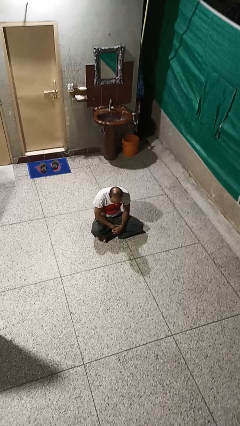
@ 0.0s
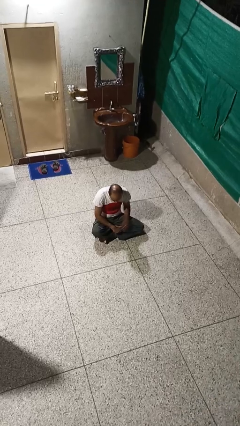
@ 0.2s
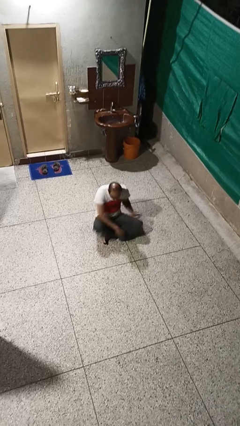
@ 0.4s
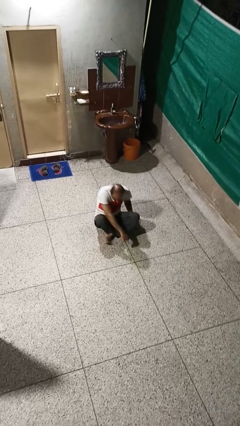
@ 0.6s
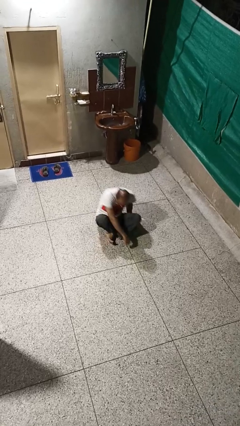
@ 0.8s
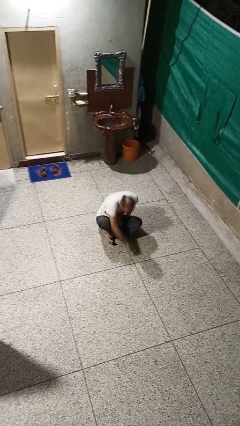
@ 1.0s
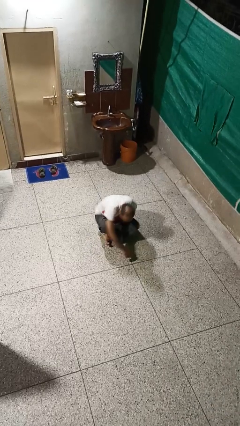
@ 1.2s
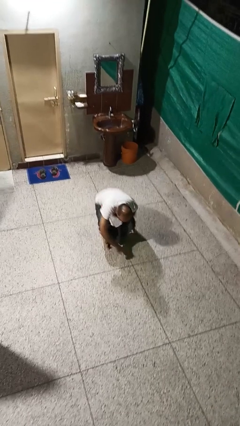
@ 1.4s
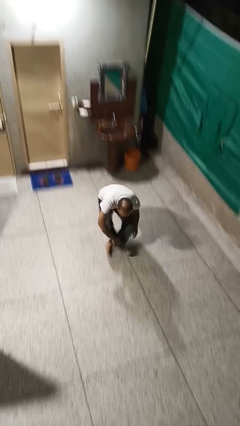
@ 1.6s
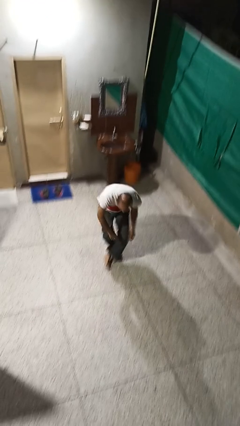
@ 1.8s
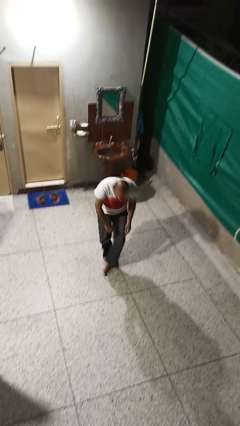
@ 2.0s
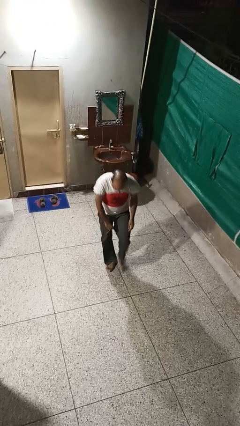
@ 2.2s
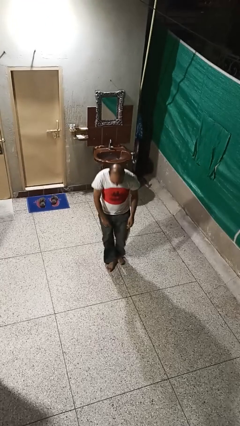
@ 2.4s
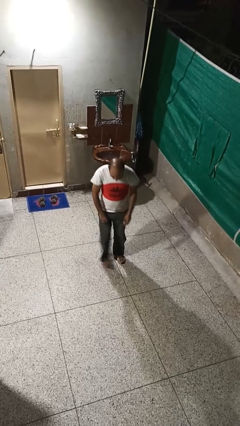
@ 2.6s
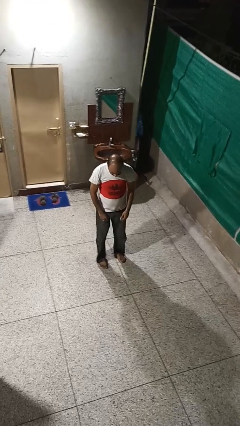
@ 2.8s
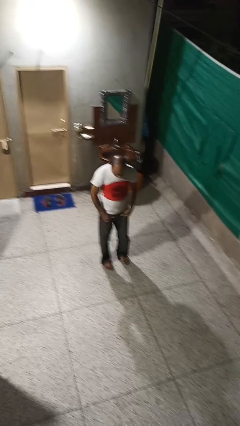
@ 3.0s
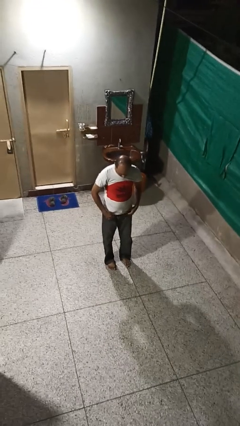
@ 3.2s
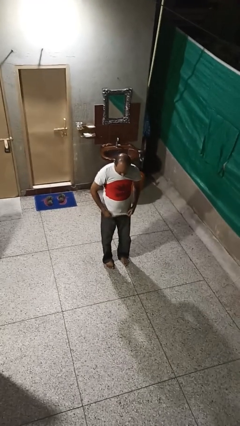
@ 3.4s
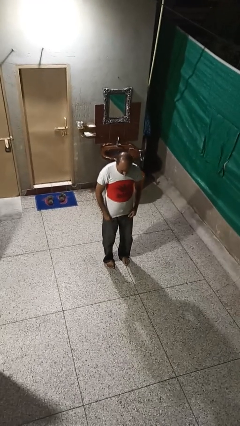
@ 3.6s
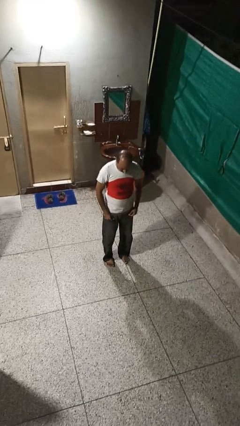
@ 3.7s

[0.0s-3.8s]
person stands up from floor

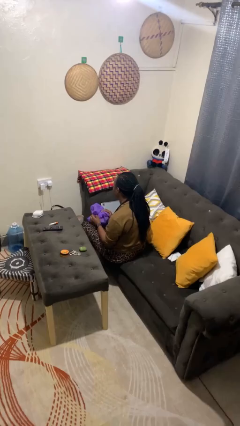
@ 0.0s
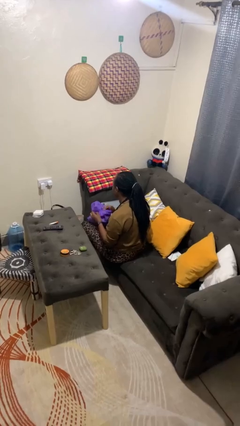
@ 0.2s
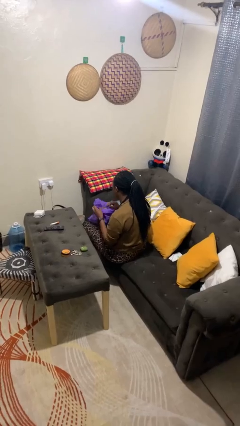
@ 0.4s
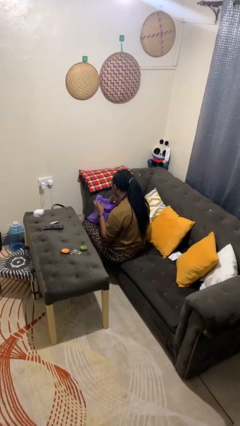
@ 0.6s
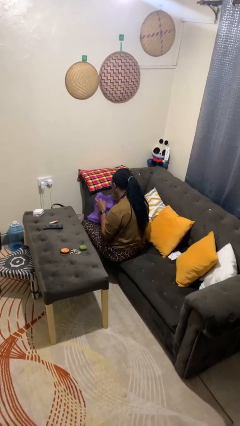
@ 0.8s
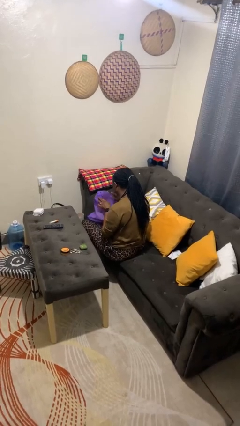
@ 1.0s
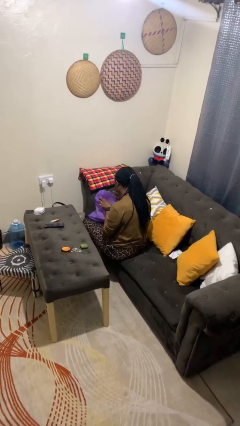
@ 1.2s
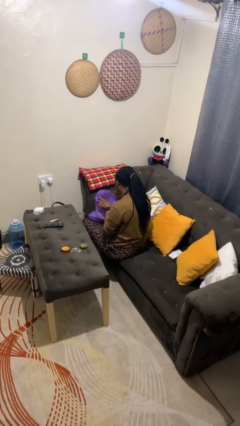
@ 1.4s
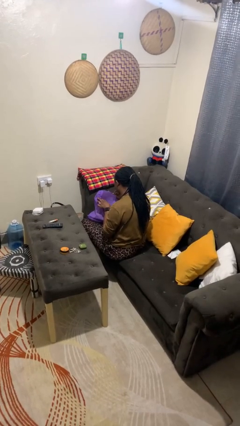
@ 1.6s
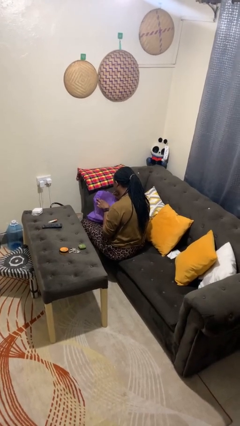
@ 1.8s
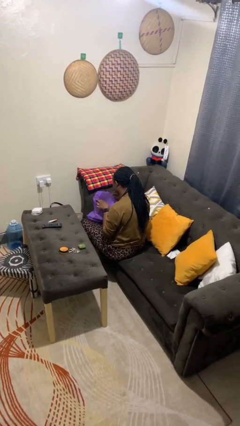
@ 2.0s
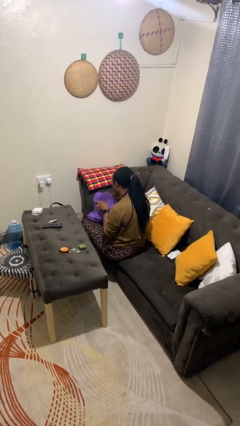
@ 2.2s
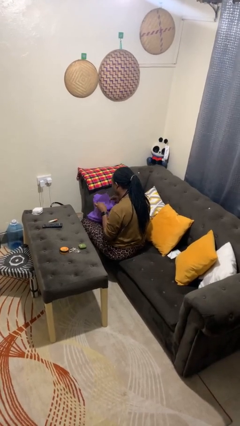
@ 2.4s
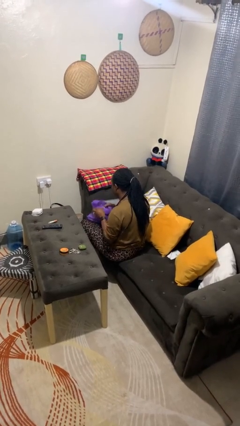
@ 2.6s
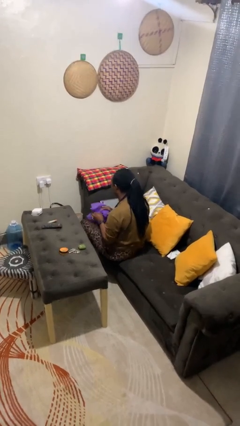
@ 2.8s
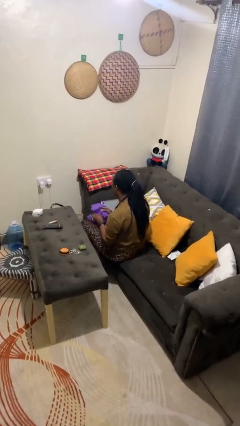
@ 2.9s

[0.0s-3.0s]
person searches in bag

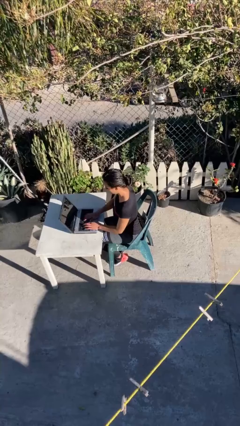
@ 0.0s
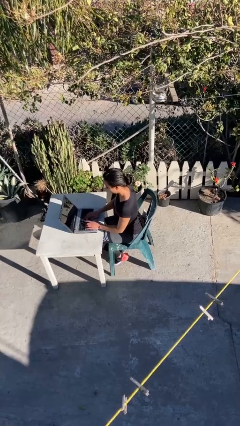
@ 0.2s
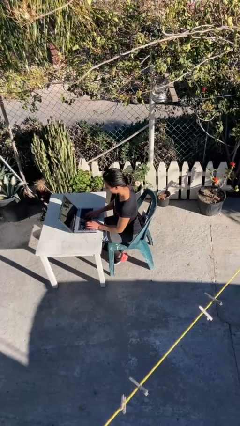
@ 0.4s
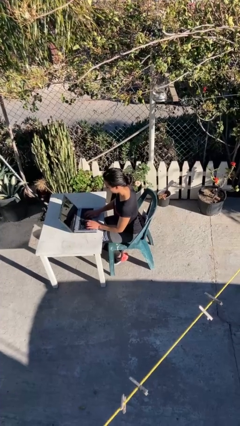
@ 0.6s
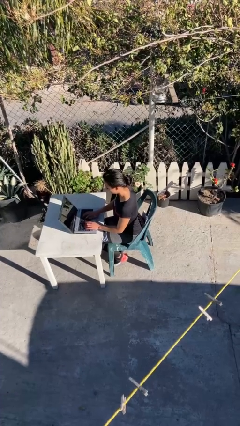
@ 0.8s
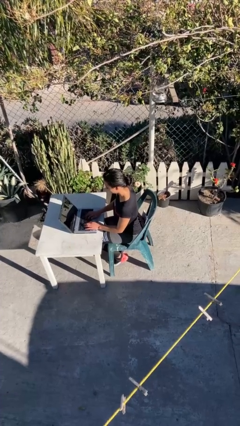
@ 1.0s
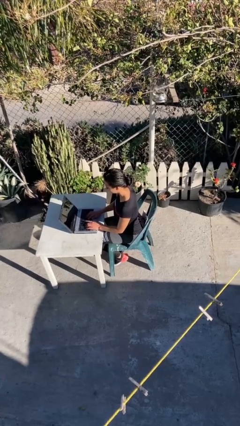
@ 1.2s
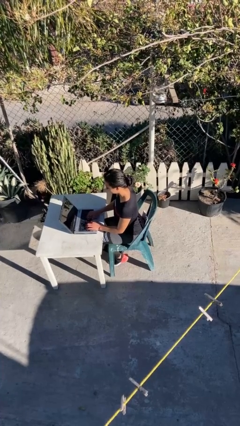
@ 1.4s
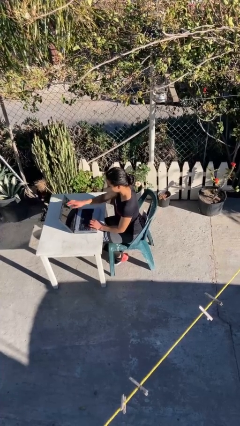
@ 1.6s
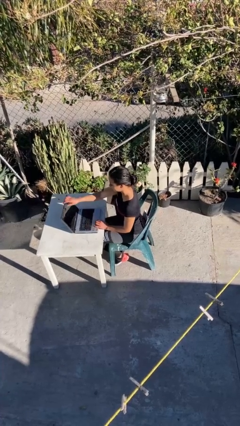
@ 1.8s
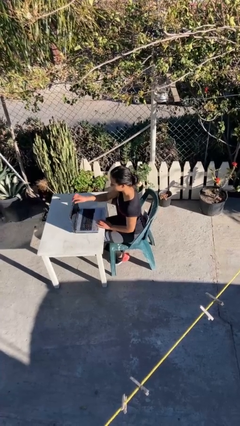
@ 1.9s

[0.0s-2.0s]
person interacts with laptop

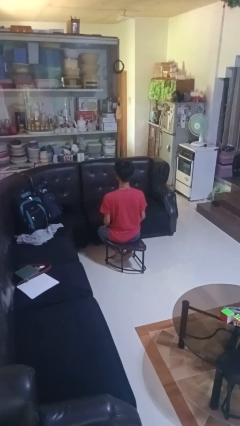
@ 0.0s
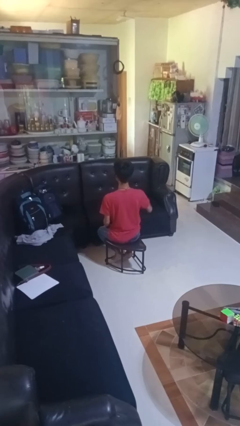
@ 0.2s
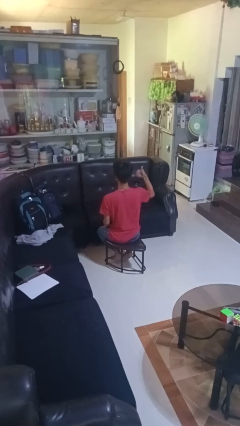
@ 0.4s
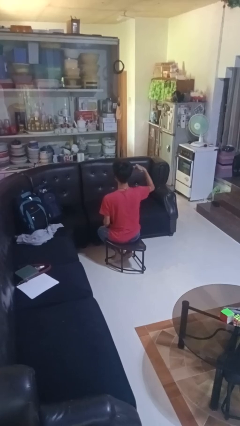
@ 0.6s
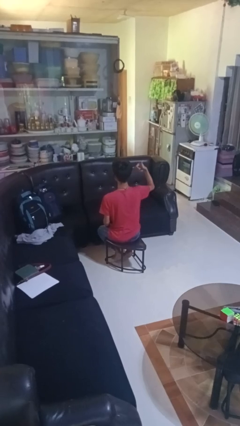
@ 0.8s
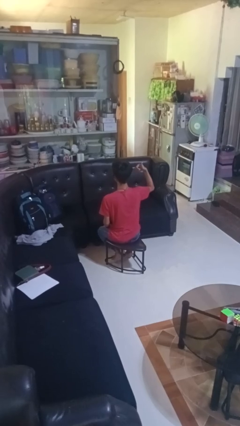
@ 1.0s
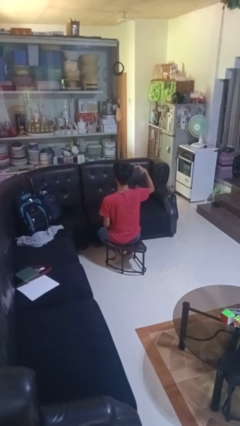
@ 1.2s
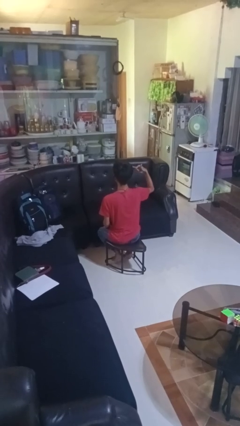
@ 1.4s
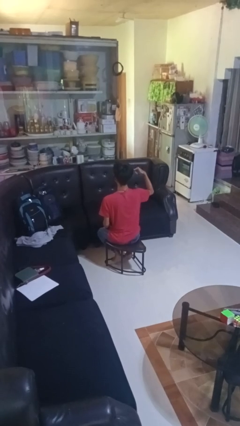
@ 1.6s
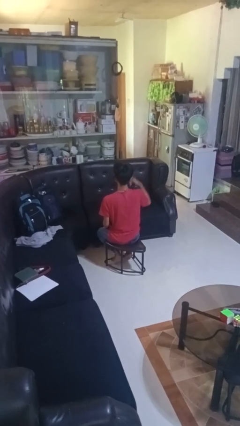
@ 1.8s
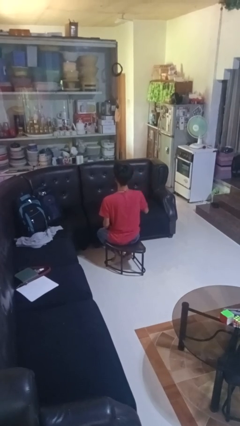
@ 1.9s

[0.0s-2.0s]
person gestures hang loose

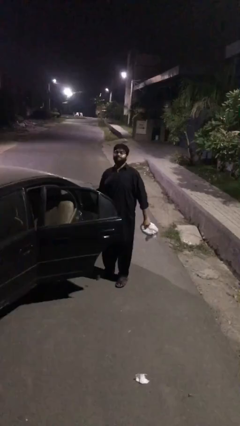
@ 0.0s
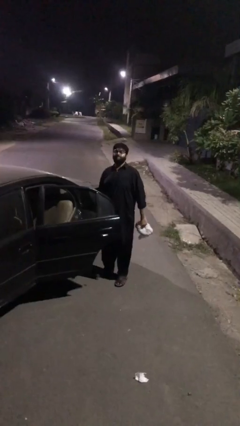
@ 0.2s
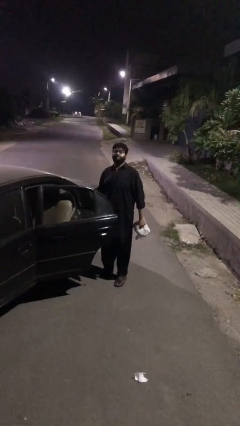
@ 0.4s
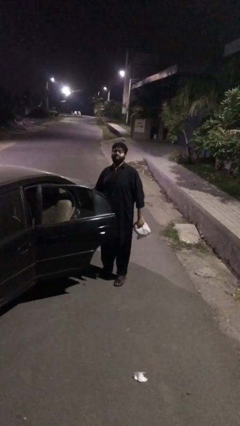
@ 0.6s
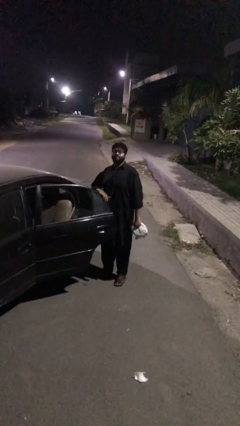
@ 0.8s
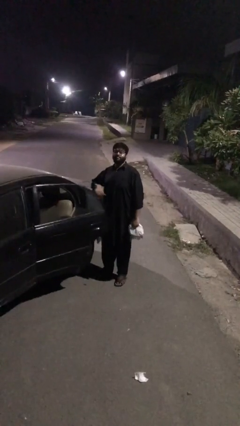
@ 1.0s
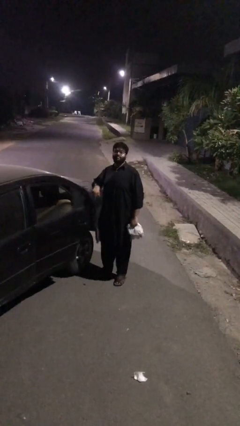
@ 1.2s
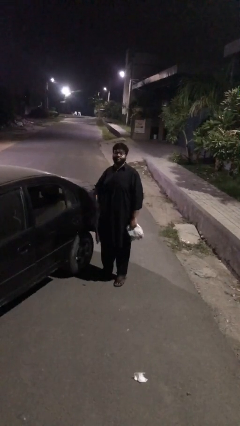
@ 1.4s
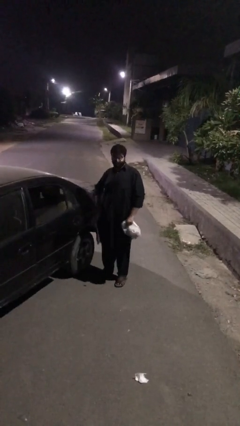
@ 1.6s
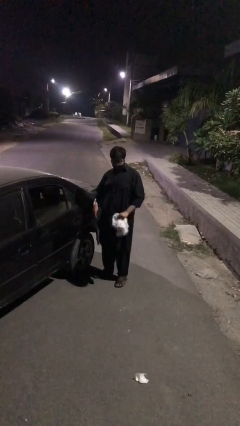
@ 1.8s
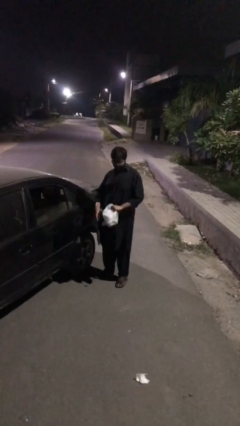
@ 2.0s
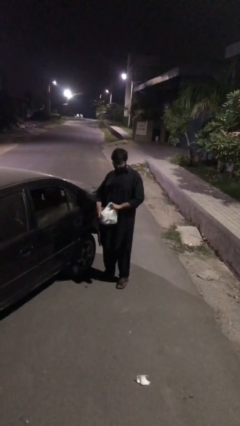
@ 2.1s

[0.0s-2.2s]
person closes car door

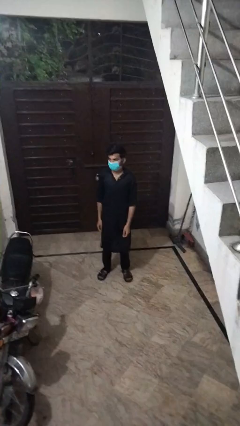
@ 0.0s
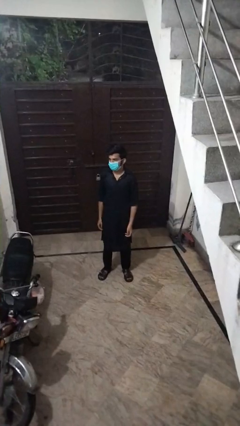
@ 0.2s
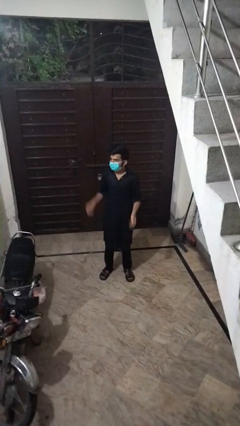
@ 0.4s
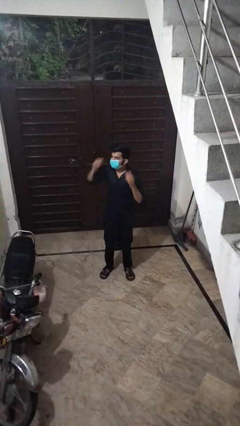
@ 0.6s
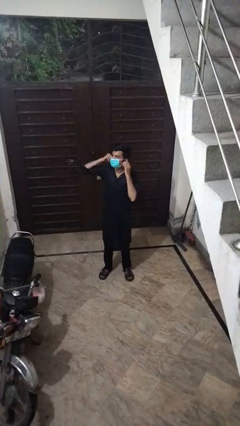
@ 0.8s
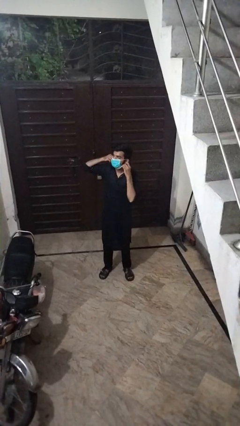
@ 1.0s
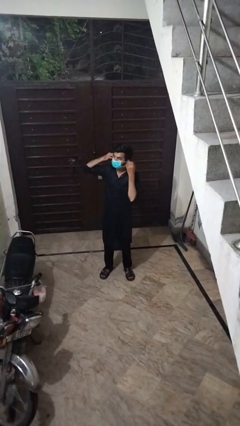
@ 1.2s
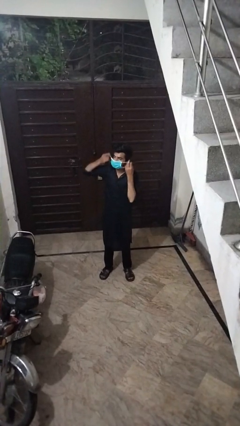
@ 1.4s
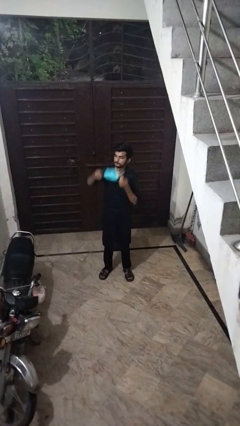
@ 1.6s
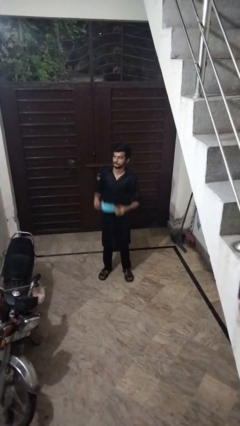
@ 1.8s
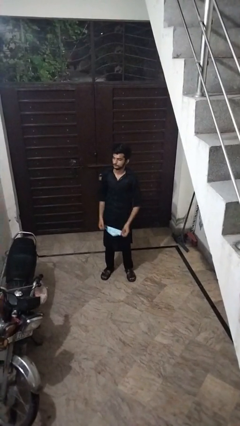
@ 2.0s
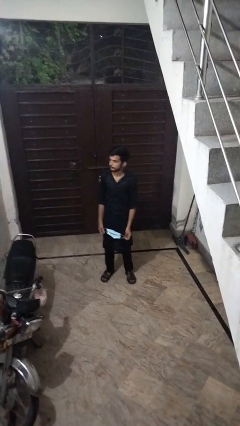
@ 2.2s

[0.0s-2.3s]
person takes off facemask

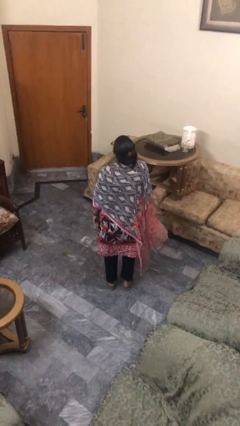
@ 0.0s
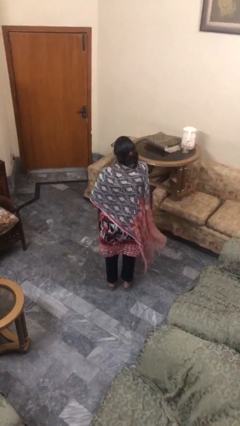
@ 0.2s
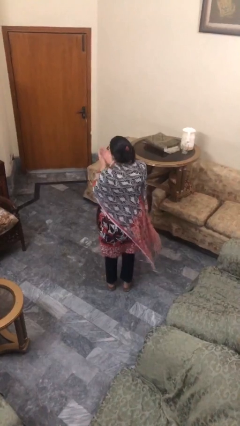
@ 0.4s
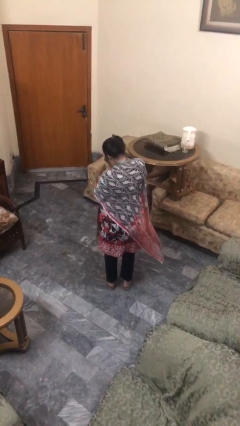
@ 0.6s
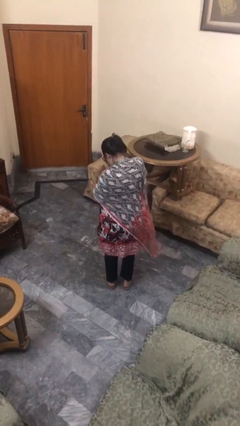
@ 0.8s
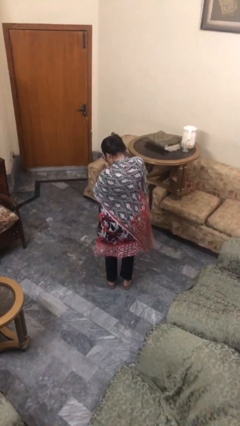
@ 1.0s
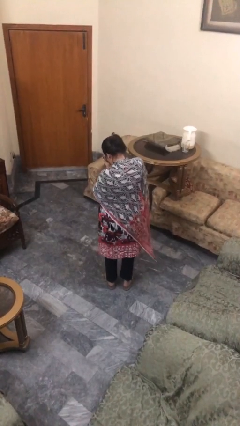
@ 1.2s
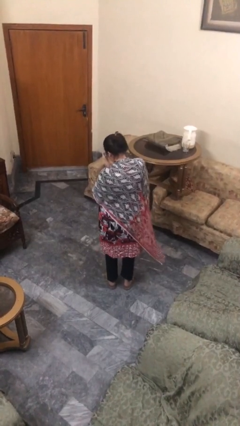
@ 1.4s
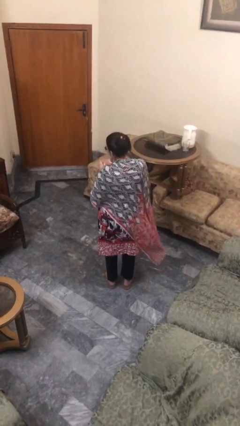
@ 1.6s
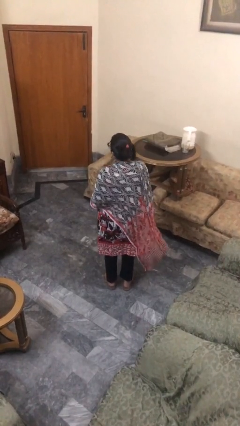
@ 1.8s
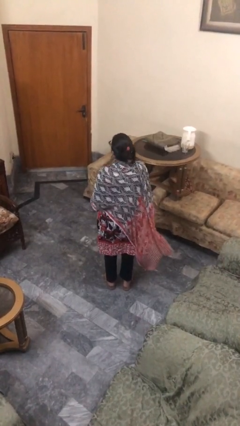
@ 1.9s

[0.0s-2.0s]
person sneezes into hand
